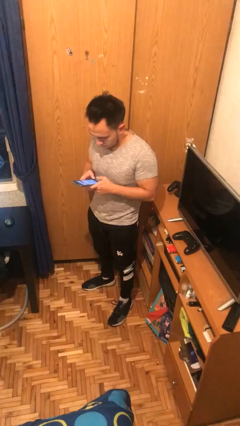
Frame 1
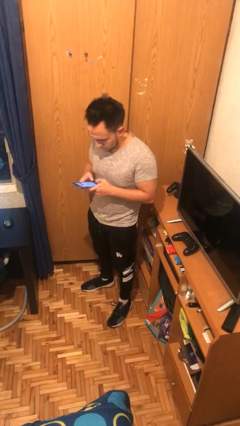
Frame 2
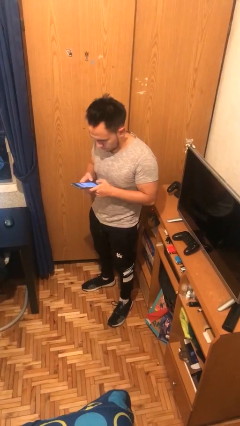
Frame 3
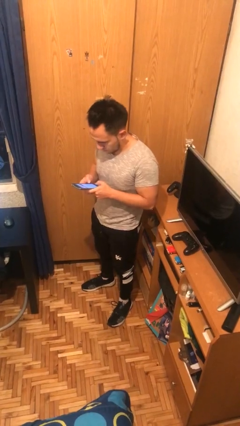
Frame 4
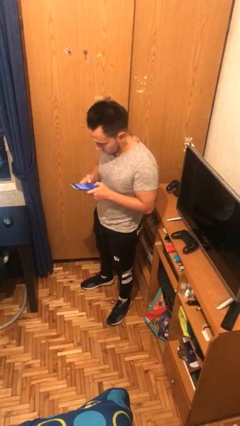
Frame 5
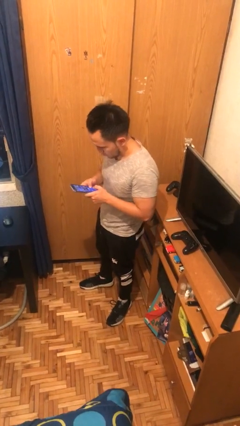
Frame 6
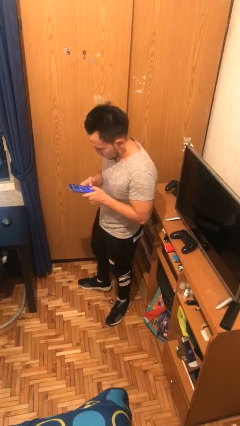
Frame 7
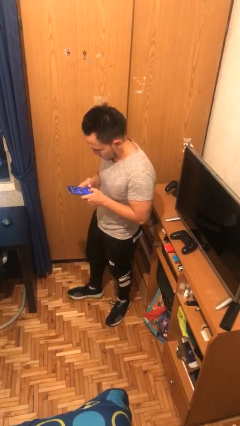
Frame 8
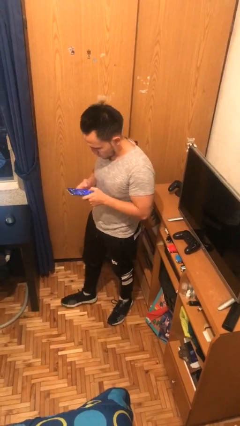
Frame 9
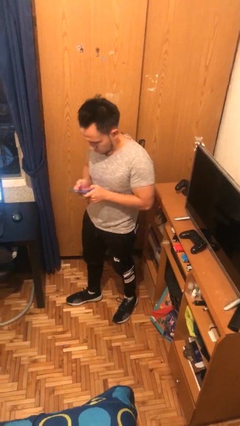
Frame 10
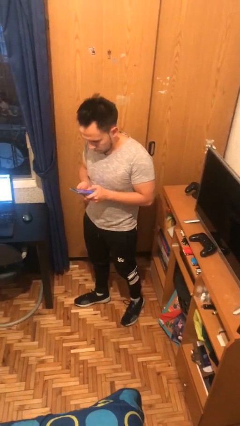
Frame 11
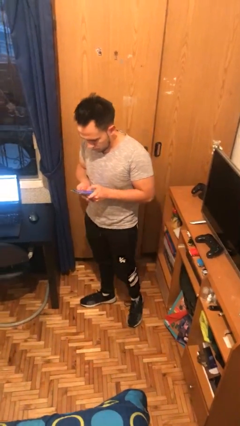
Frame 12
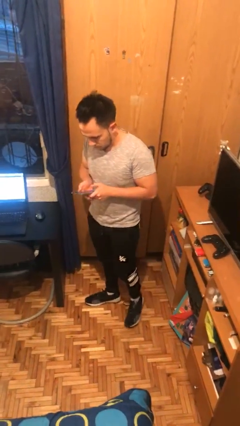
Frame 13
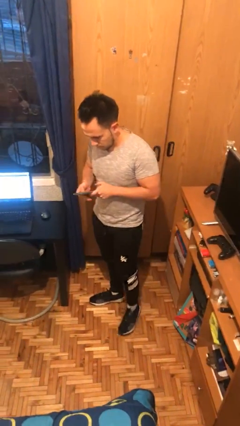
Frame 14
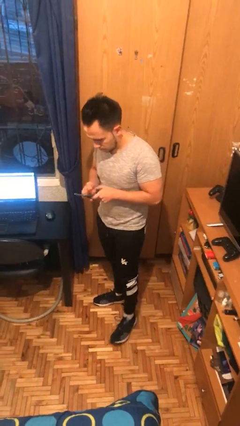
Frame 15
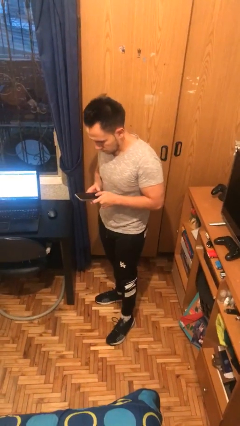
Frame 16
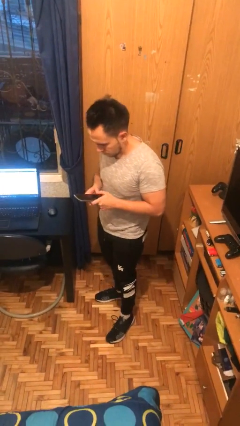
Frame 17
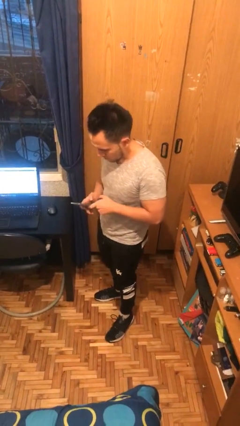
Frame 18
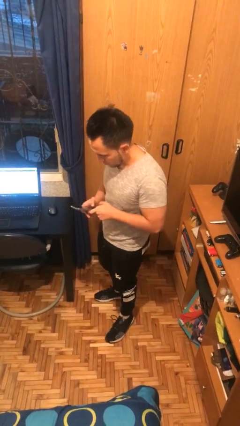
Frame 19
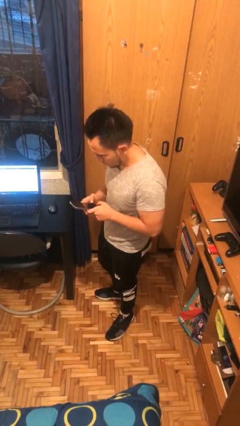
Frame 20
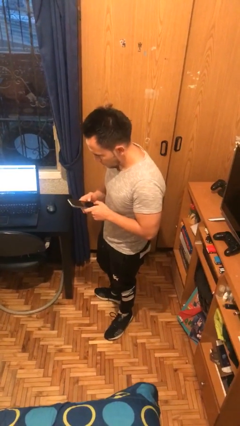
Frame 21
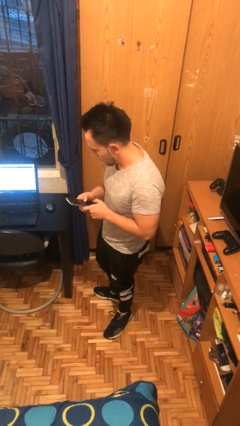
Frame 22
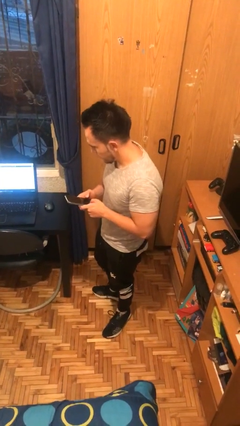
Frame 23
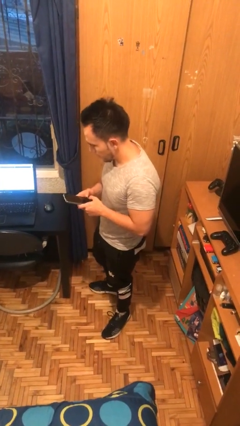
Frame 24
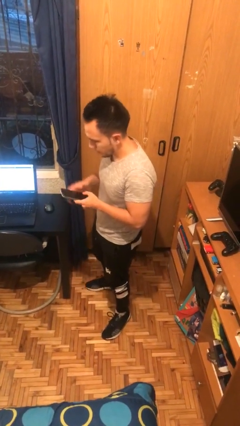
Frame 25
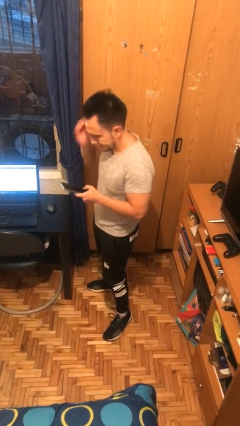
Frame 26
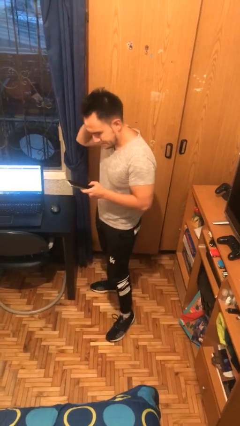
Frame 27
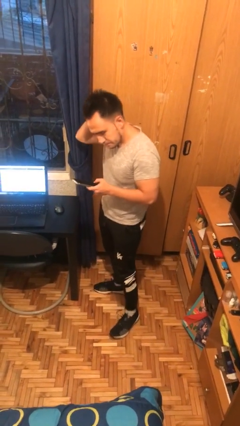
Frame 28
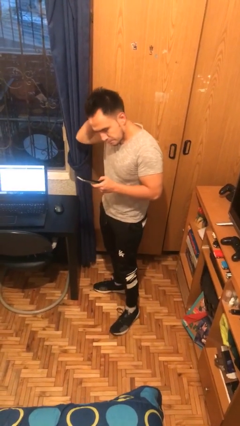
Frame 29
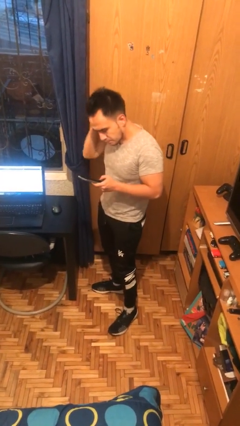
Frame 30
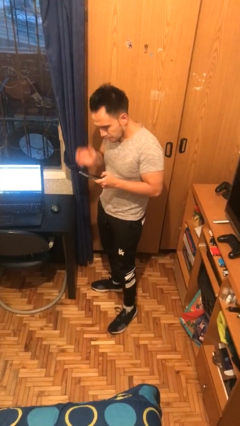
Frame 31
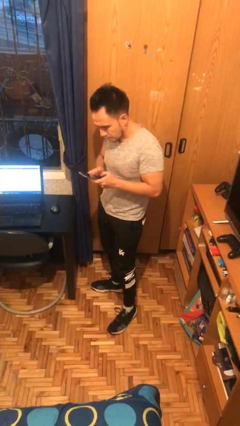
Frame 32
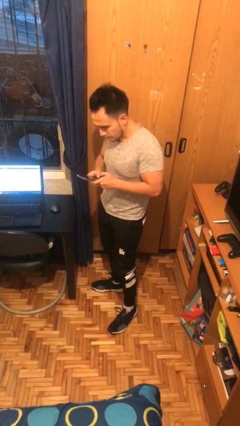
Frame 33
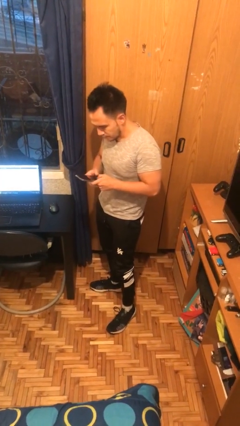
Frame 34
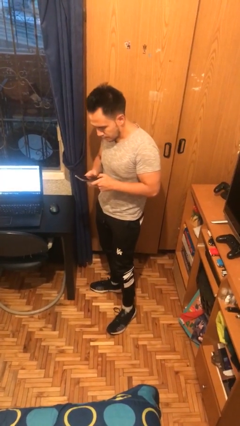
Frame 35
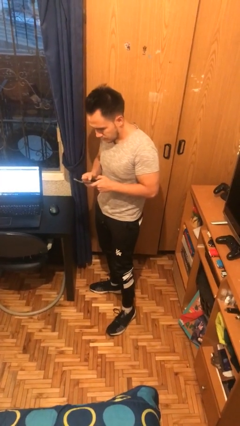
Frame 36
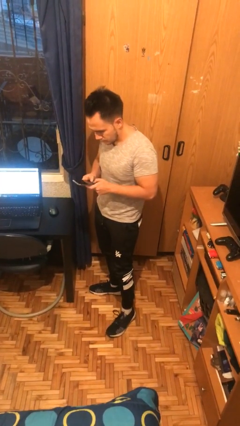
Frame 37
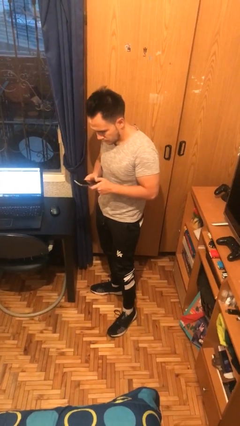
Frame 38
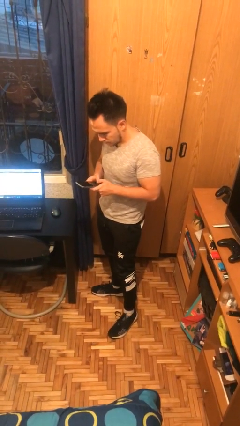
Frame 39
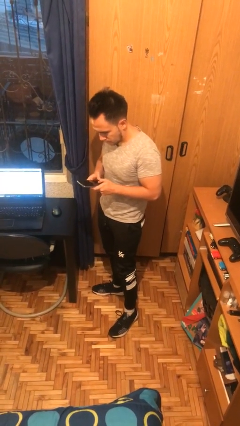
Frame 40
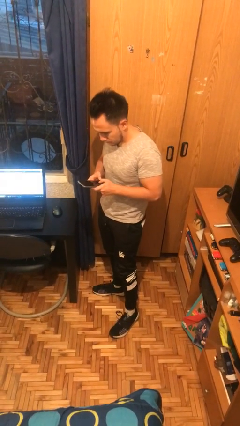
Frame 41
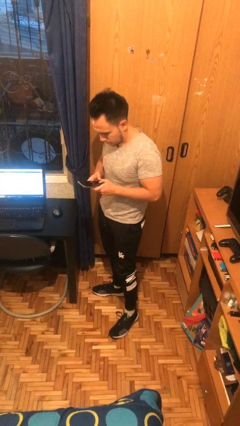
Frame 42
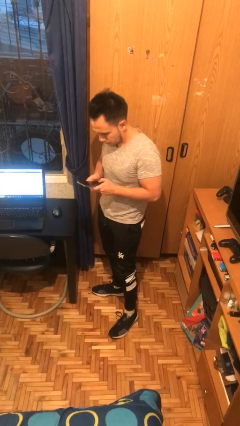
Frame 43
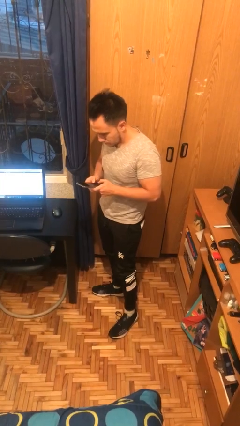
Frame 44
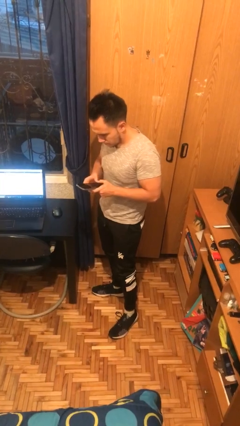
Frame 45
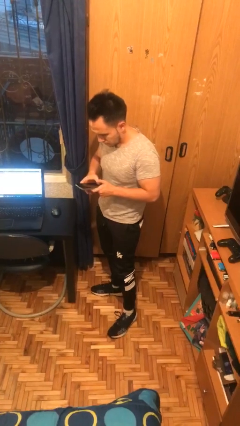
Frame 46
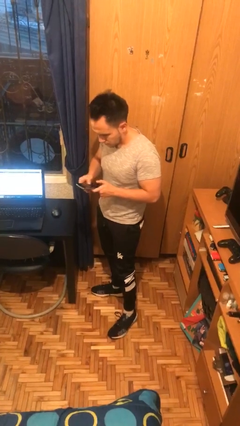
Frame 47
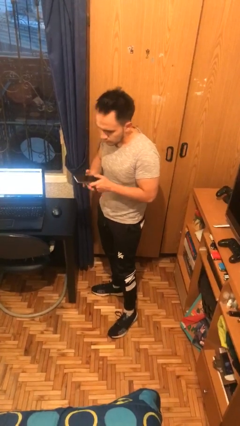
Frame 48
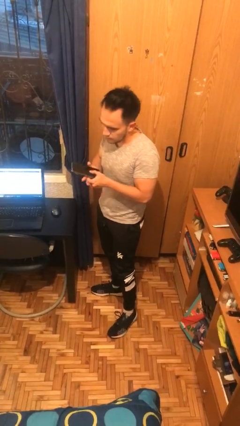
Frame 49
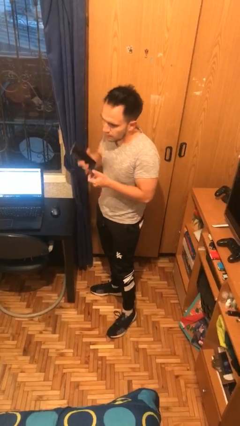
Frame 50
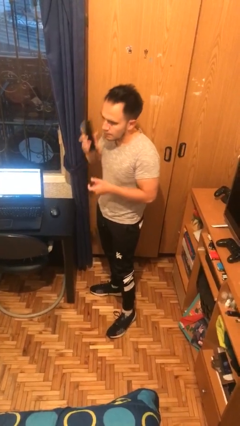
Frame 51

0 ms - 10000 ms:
person texts on phone

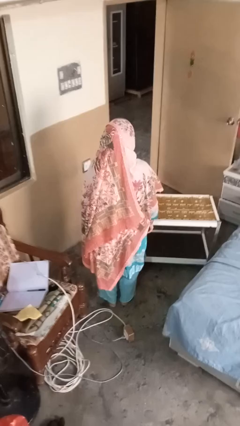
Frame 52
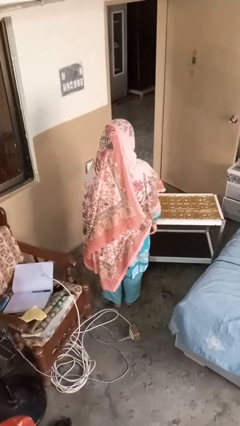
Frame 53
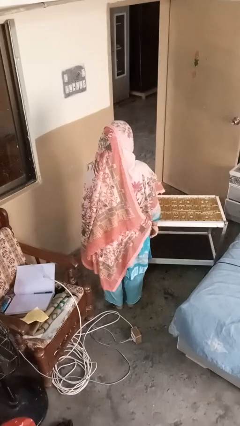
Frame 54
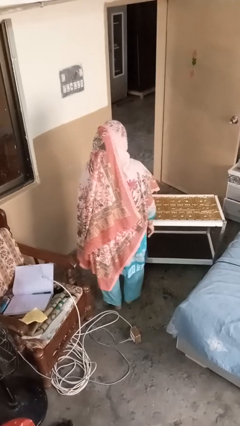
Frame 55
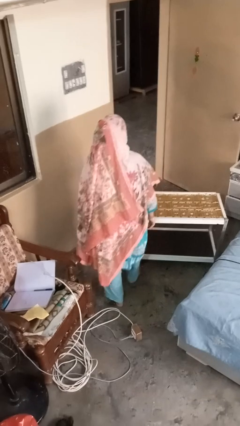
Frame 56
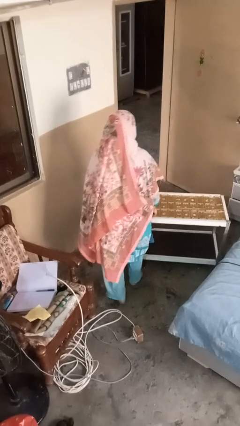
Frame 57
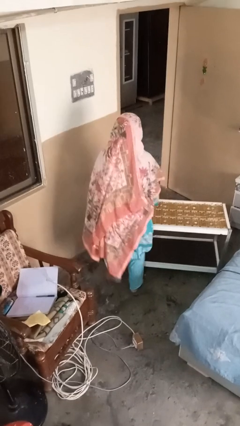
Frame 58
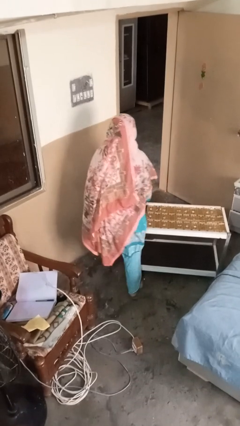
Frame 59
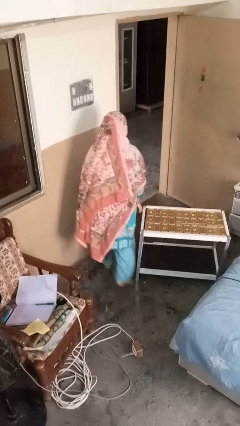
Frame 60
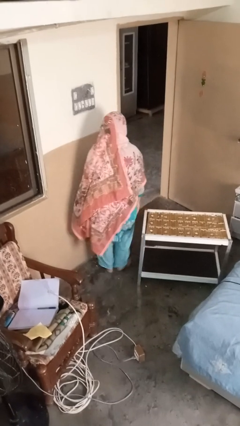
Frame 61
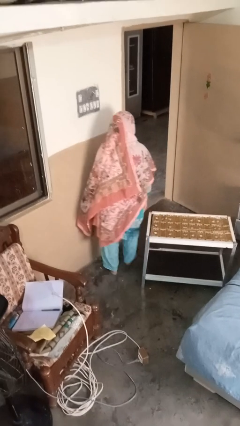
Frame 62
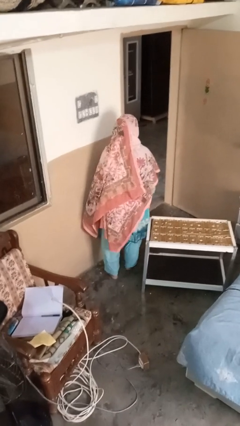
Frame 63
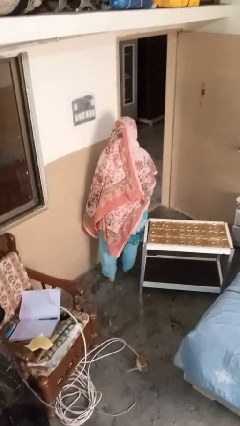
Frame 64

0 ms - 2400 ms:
person bumps into table

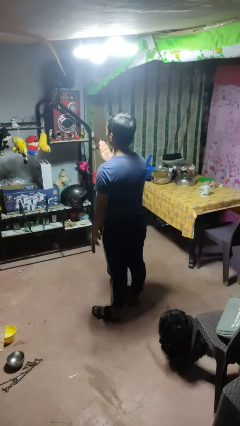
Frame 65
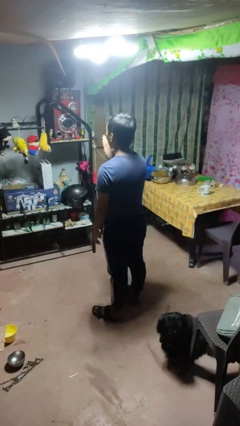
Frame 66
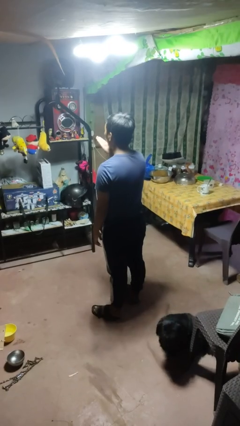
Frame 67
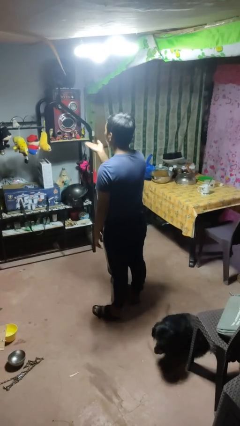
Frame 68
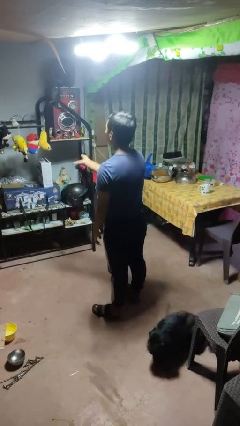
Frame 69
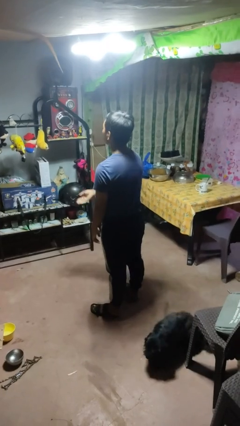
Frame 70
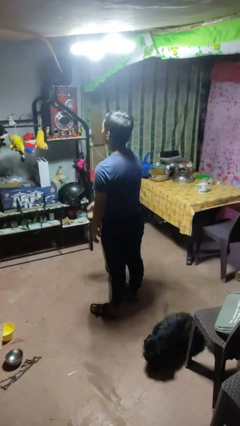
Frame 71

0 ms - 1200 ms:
person gestures blow kiss

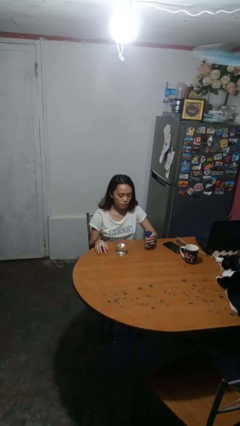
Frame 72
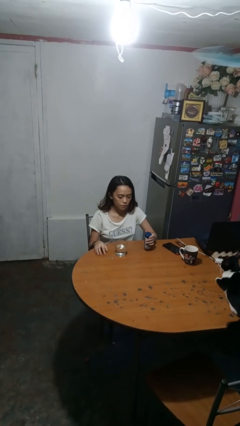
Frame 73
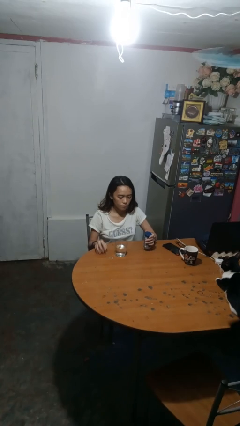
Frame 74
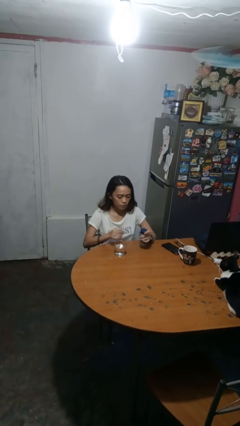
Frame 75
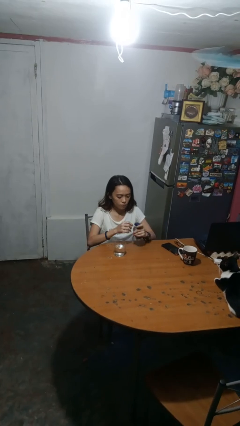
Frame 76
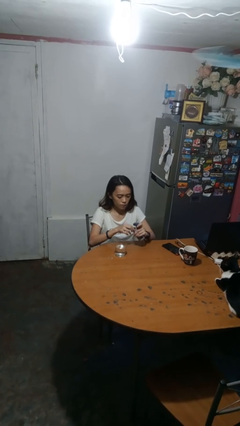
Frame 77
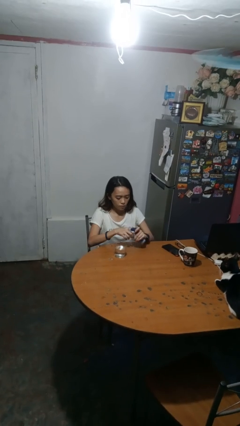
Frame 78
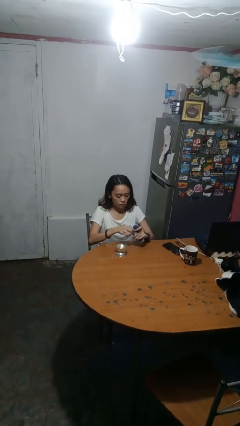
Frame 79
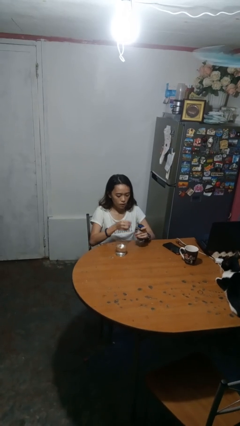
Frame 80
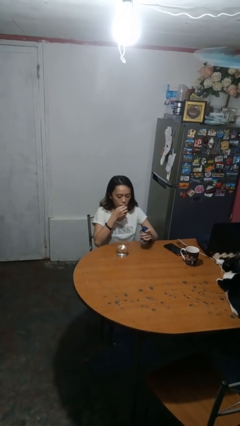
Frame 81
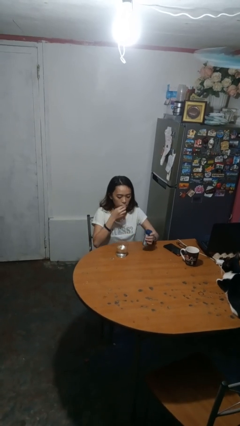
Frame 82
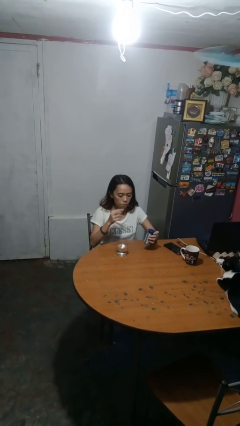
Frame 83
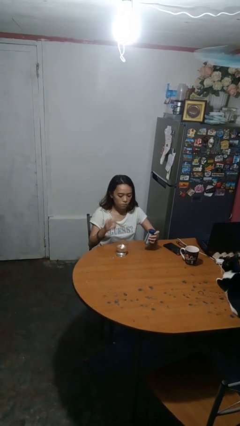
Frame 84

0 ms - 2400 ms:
person takes medicine pills

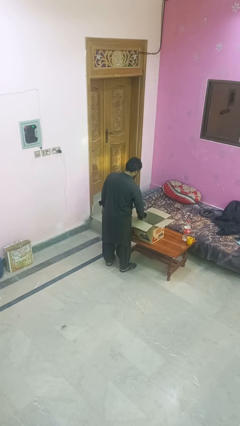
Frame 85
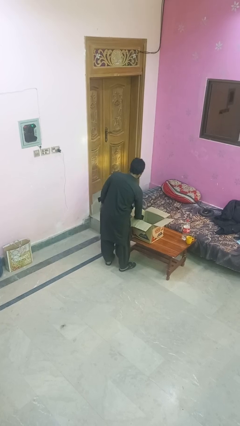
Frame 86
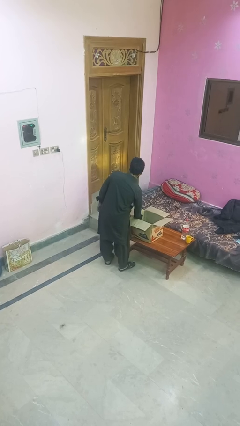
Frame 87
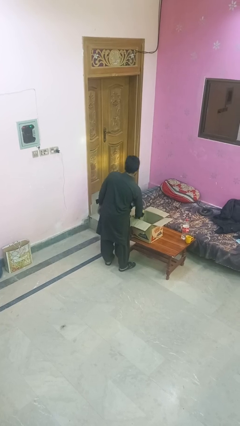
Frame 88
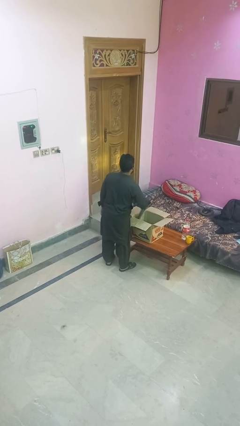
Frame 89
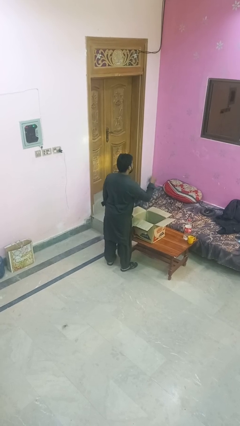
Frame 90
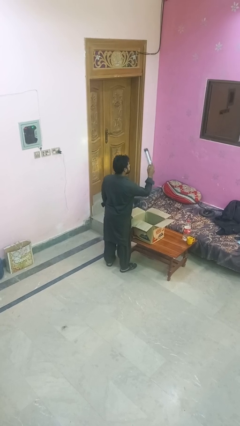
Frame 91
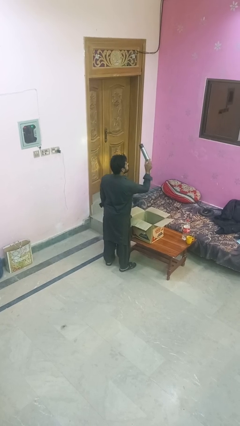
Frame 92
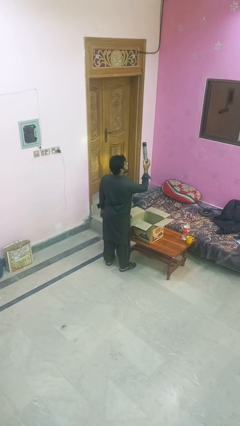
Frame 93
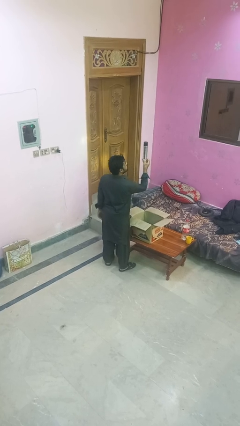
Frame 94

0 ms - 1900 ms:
person takes object from box
